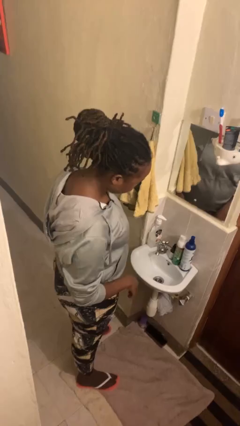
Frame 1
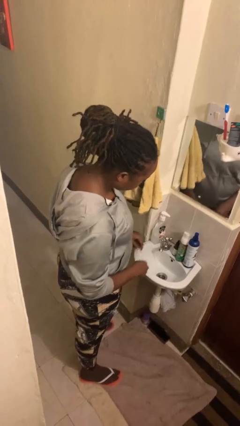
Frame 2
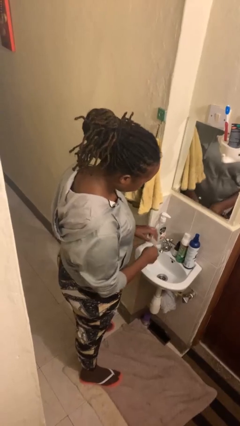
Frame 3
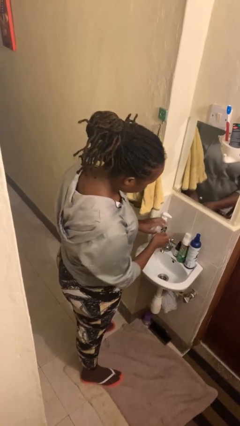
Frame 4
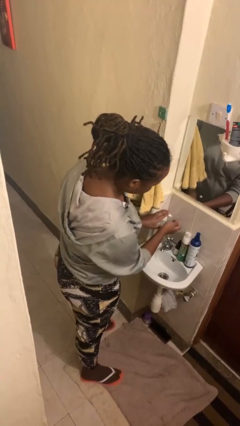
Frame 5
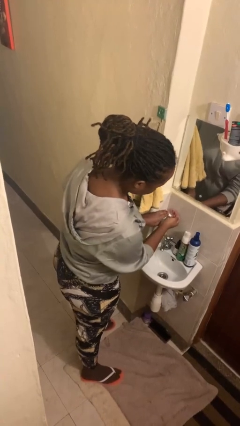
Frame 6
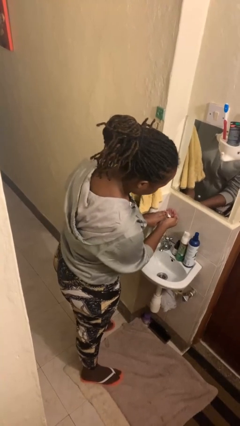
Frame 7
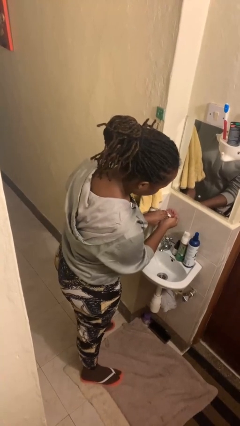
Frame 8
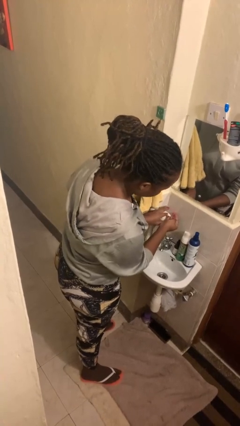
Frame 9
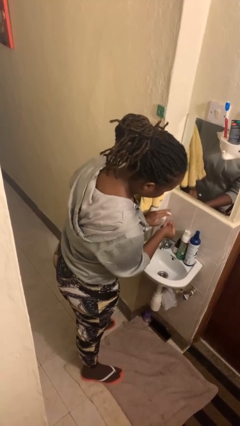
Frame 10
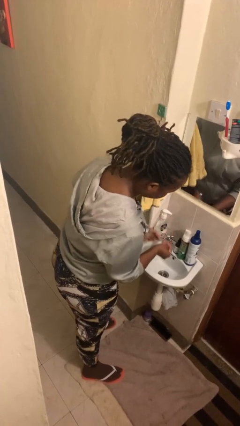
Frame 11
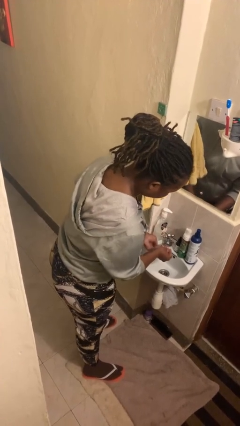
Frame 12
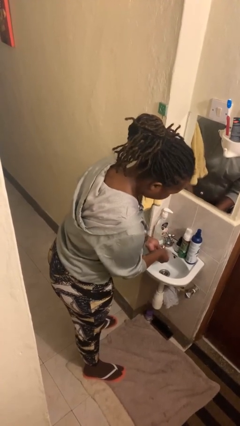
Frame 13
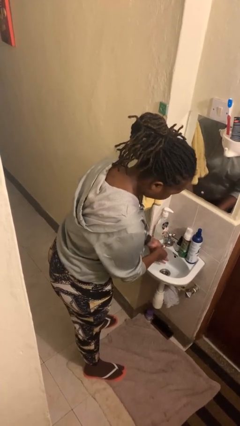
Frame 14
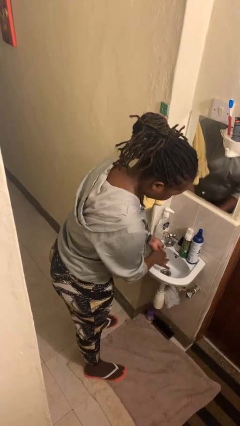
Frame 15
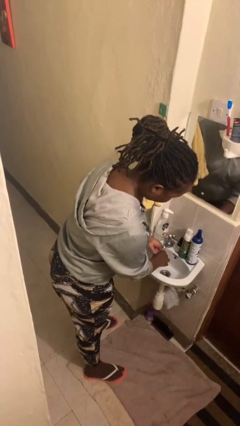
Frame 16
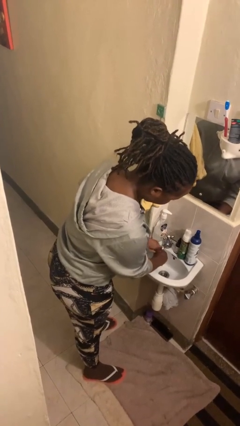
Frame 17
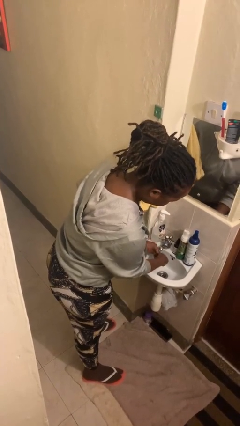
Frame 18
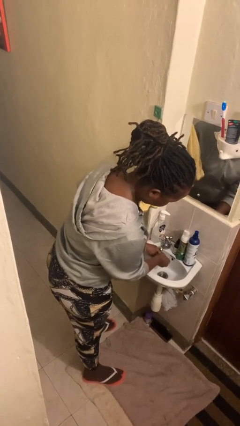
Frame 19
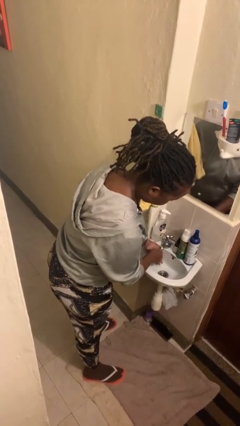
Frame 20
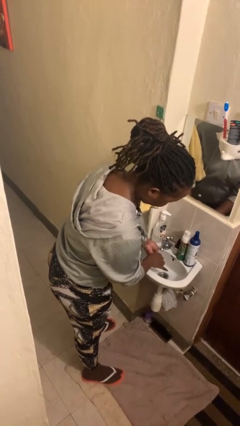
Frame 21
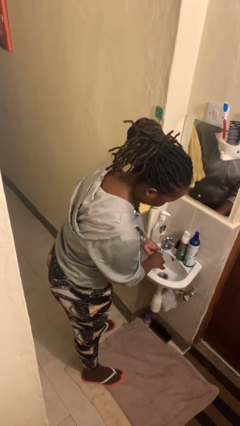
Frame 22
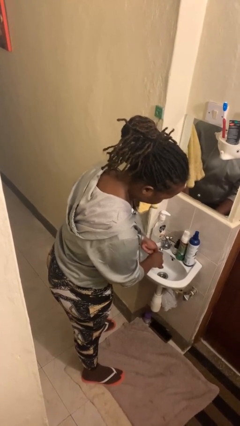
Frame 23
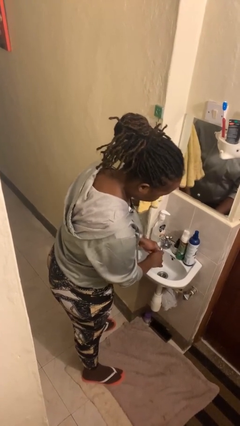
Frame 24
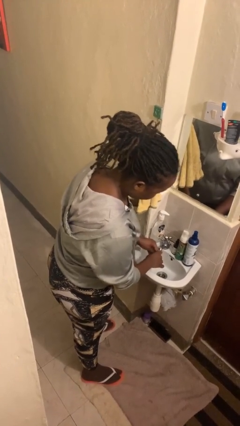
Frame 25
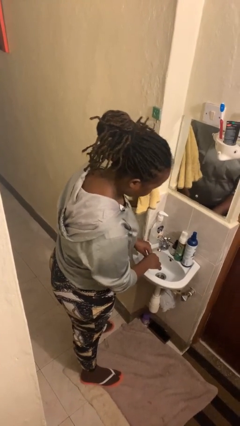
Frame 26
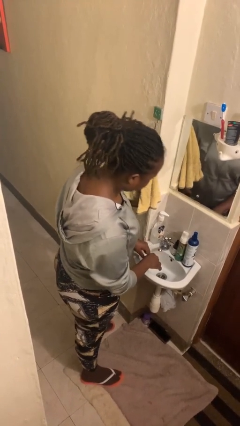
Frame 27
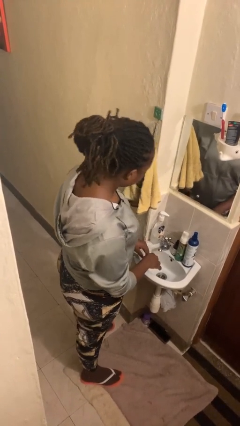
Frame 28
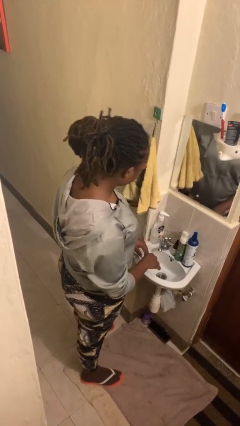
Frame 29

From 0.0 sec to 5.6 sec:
person washes hands

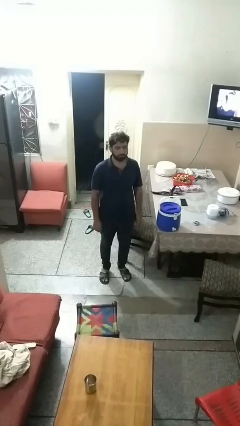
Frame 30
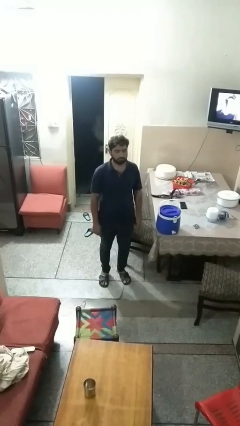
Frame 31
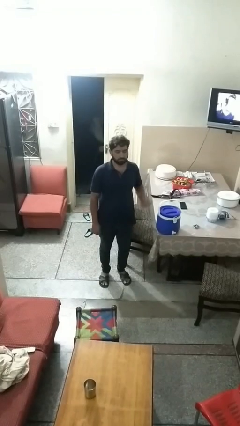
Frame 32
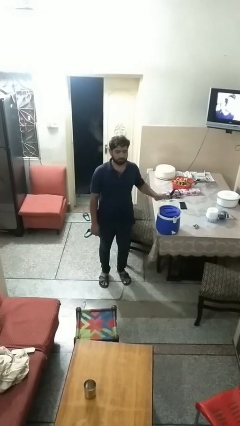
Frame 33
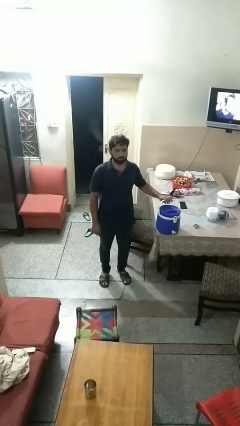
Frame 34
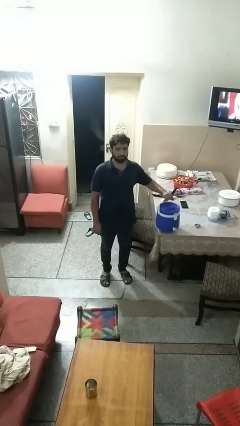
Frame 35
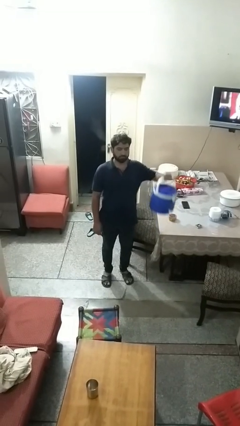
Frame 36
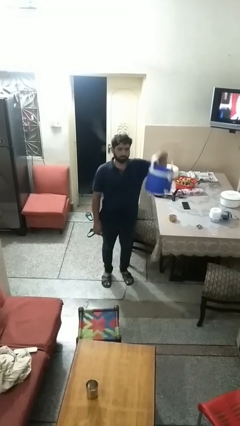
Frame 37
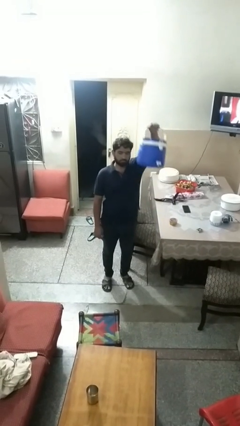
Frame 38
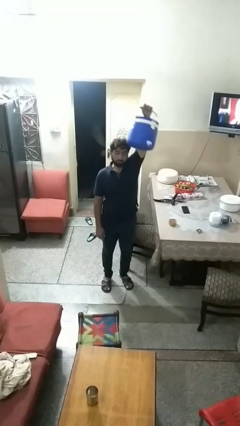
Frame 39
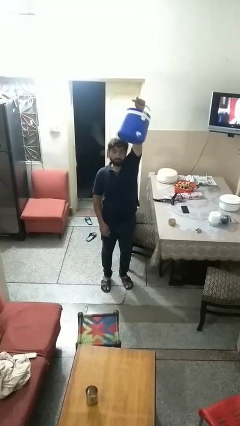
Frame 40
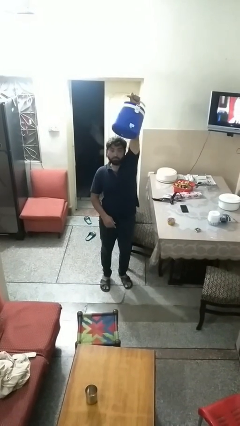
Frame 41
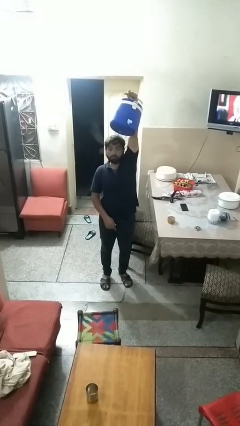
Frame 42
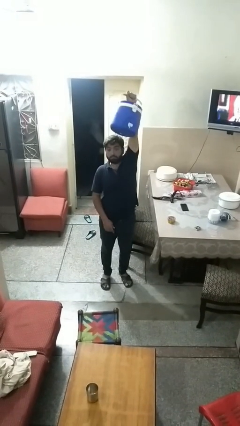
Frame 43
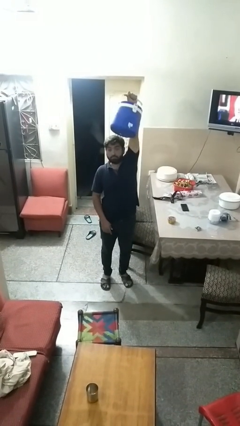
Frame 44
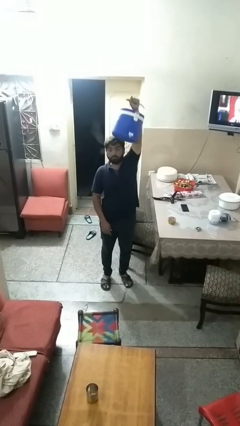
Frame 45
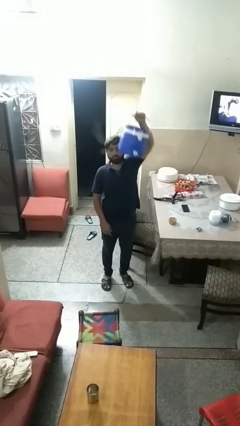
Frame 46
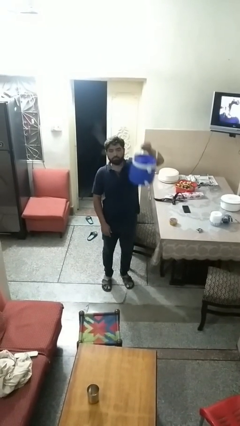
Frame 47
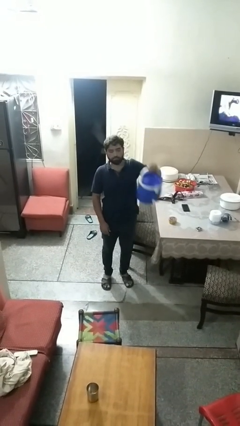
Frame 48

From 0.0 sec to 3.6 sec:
person holds object above head

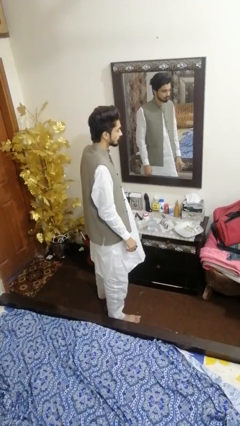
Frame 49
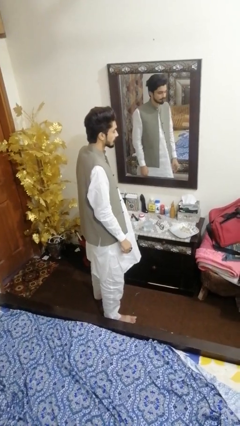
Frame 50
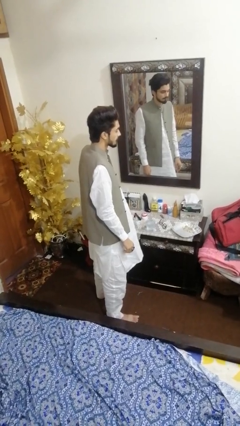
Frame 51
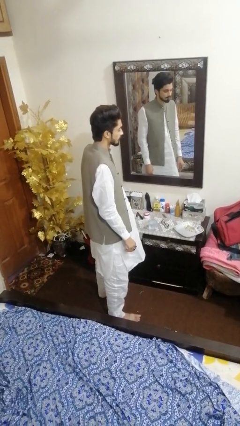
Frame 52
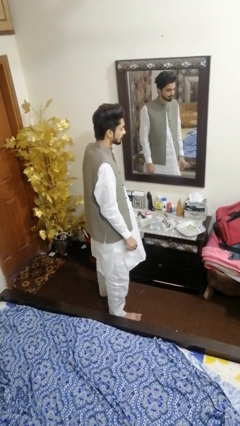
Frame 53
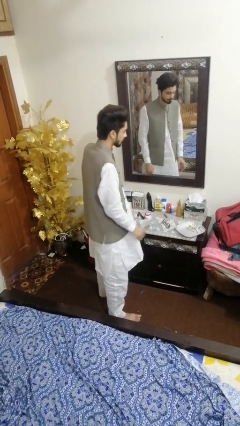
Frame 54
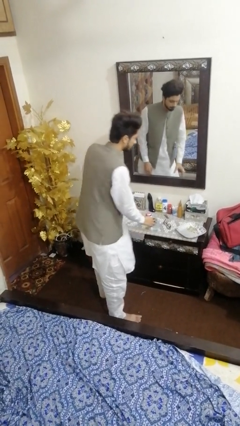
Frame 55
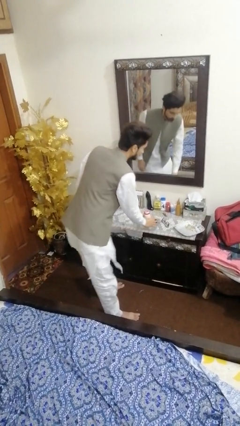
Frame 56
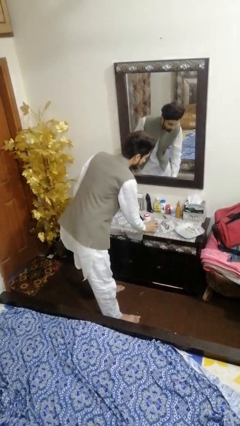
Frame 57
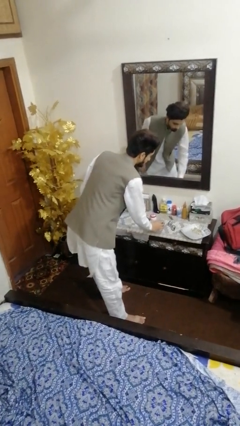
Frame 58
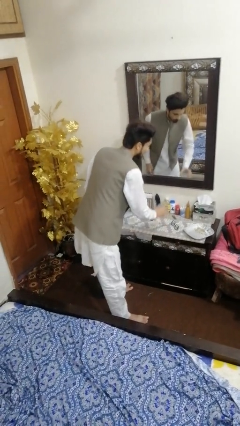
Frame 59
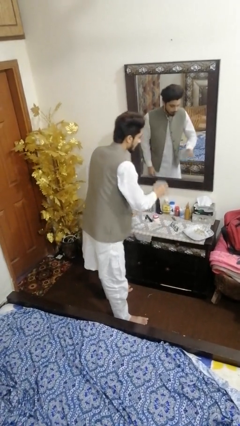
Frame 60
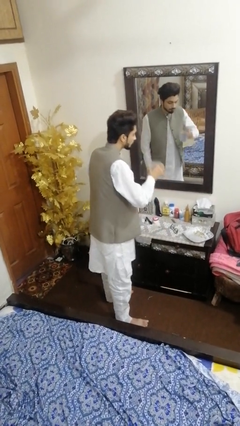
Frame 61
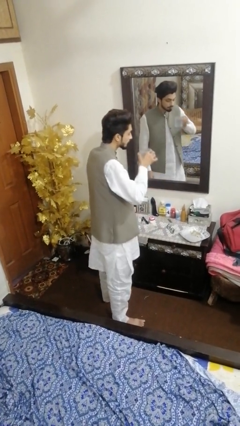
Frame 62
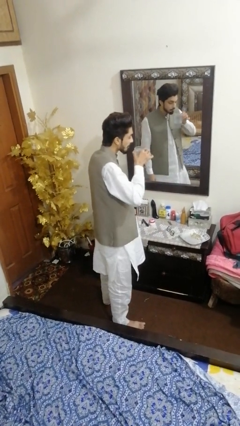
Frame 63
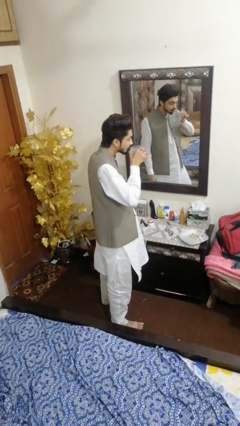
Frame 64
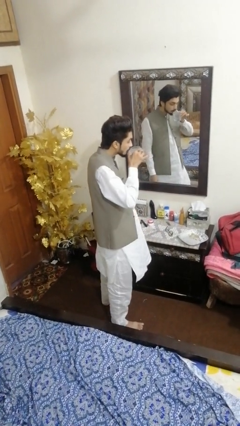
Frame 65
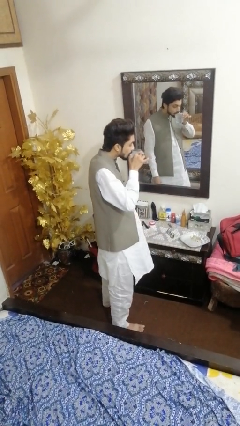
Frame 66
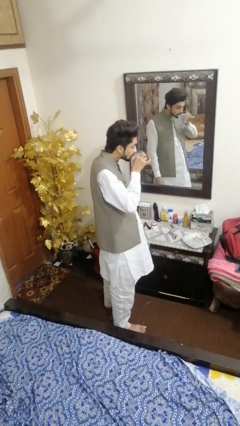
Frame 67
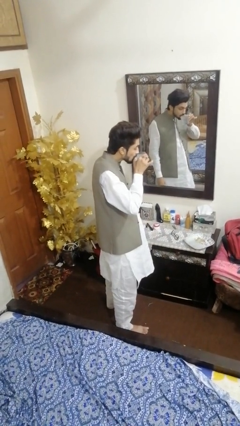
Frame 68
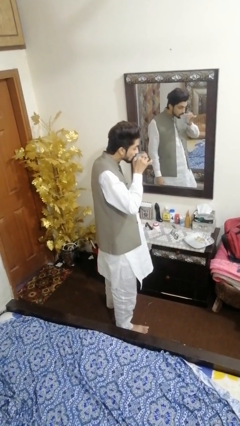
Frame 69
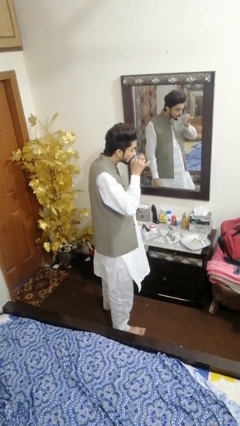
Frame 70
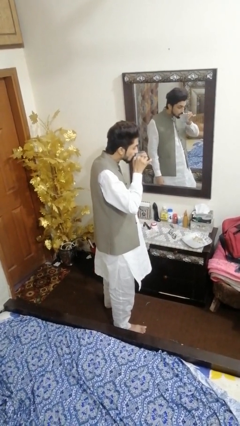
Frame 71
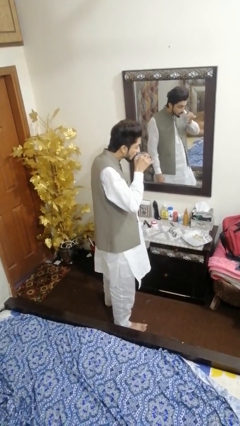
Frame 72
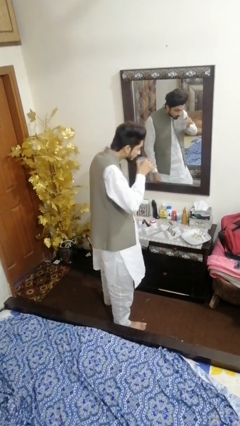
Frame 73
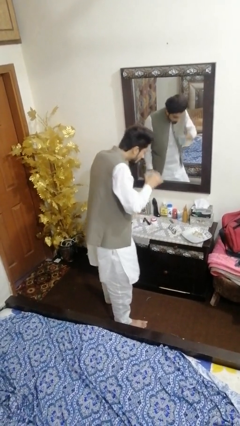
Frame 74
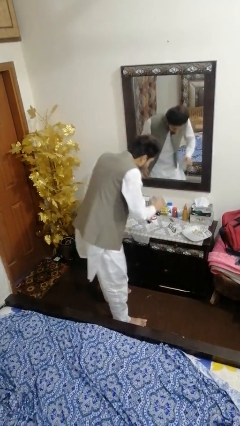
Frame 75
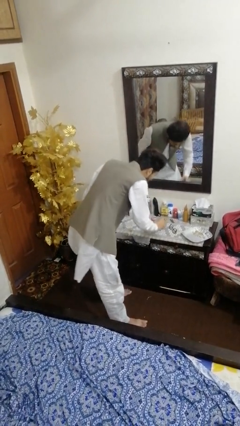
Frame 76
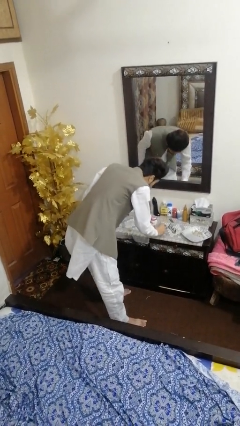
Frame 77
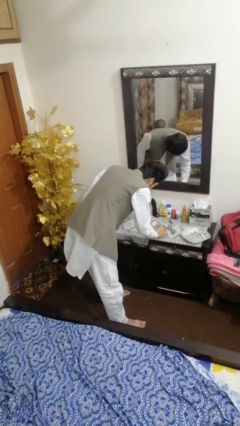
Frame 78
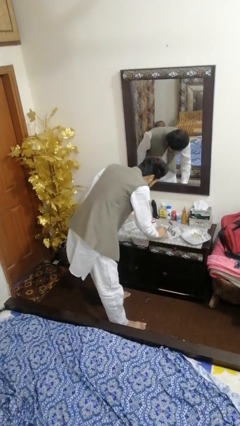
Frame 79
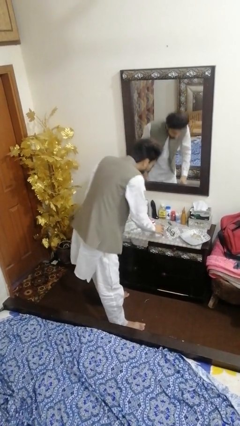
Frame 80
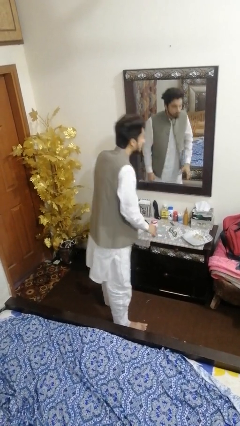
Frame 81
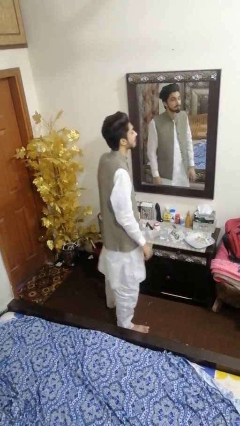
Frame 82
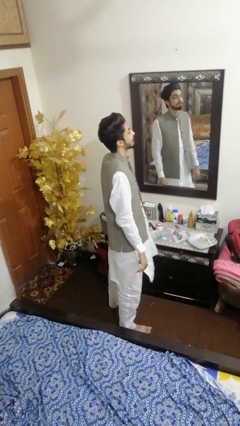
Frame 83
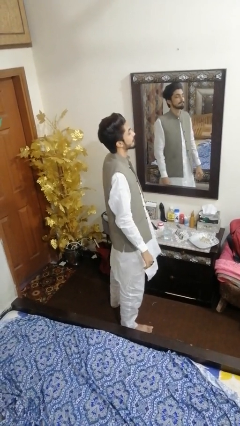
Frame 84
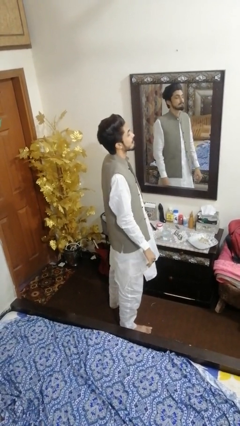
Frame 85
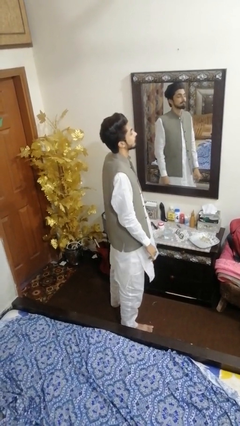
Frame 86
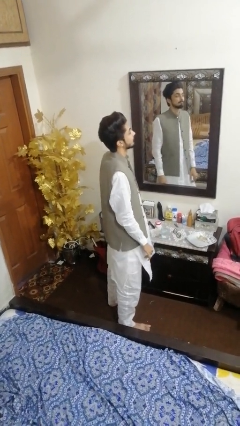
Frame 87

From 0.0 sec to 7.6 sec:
person drinks from cup

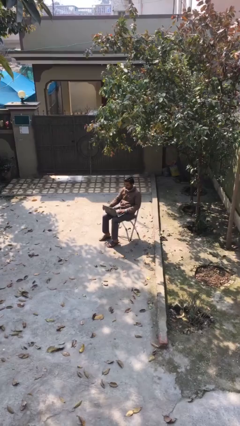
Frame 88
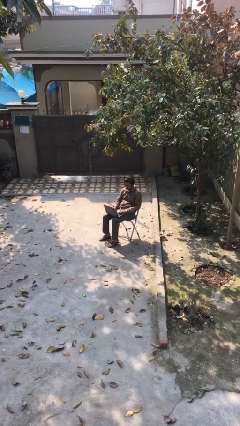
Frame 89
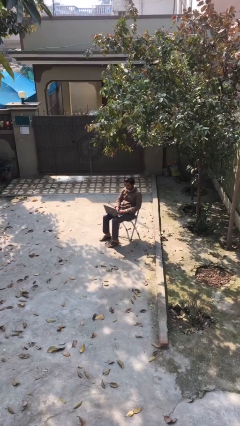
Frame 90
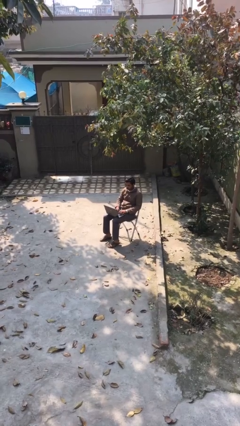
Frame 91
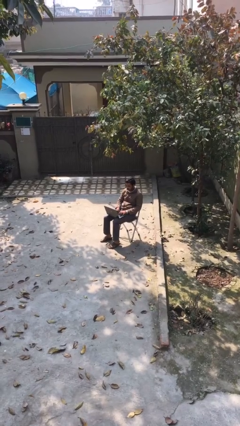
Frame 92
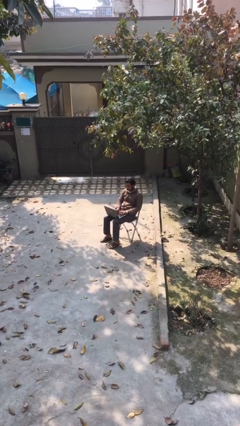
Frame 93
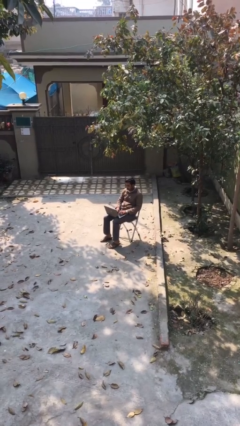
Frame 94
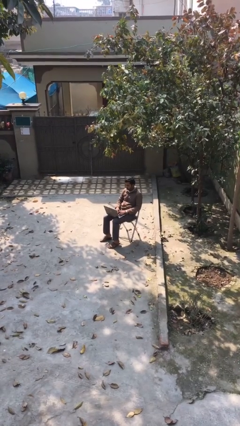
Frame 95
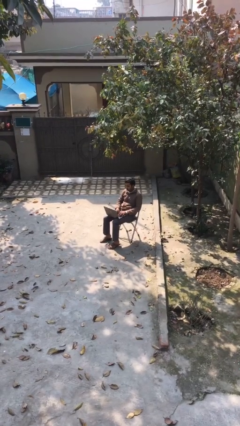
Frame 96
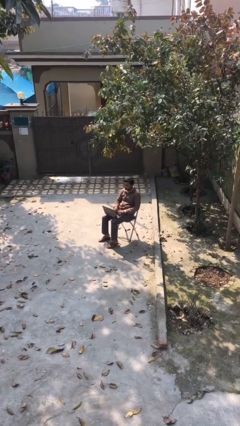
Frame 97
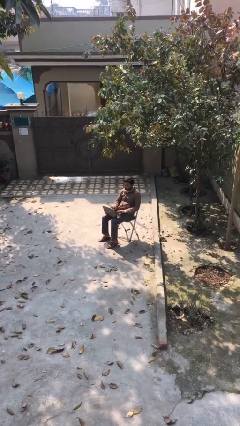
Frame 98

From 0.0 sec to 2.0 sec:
person interacts with laptop
